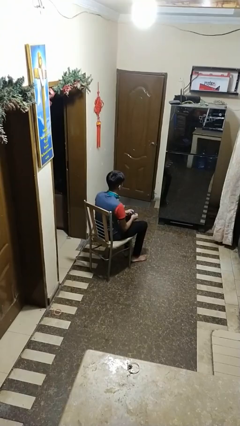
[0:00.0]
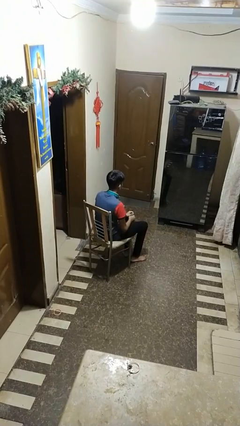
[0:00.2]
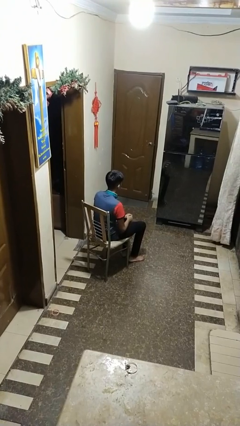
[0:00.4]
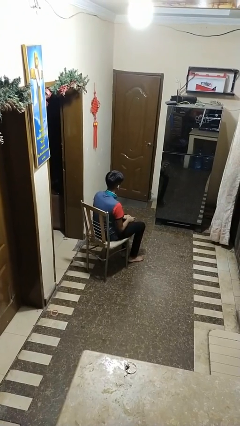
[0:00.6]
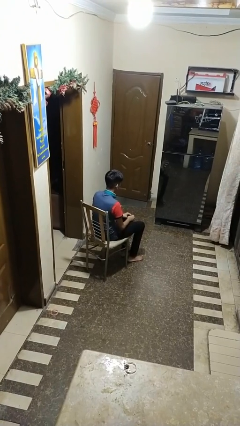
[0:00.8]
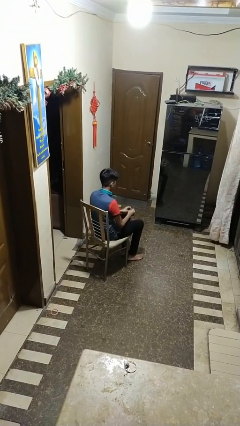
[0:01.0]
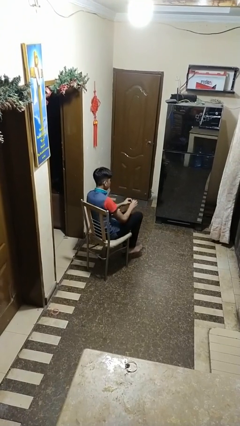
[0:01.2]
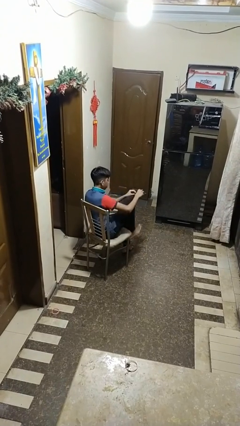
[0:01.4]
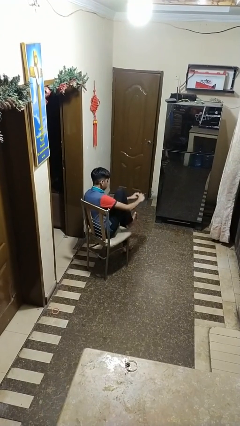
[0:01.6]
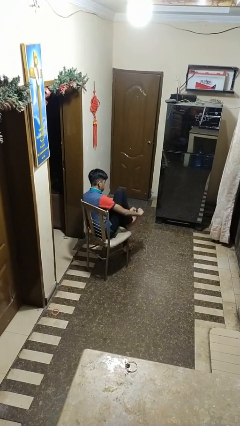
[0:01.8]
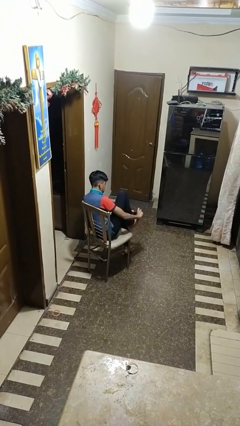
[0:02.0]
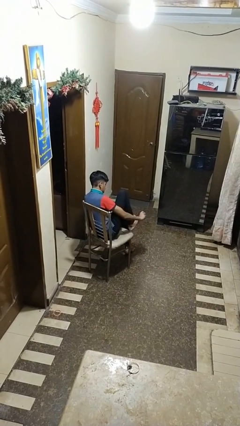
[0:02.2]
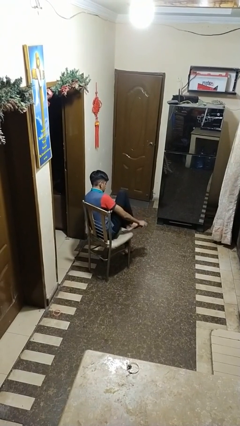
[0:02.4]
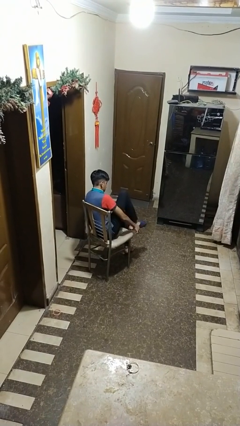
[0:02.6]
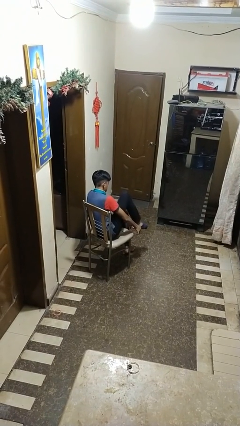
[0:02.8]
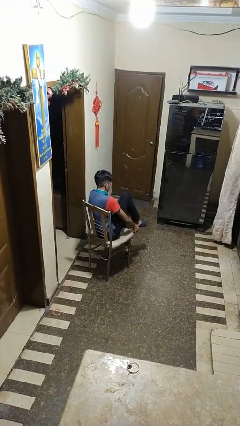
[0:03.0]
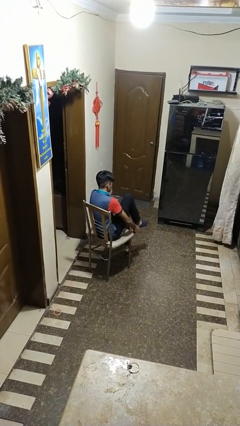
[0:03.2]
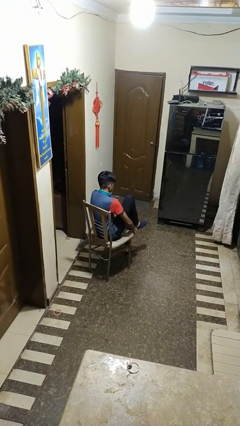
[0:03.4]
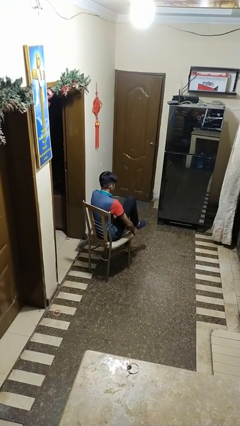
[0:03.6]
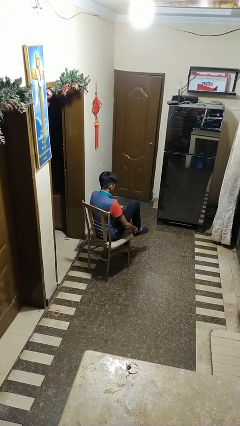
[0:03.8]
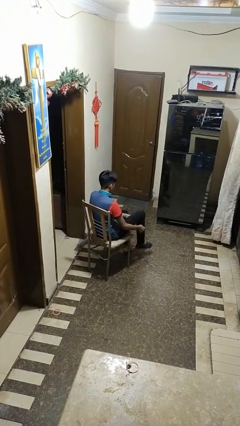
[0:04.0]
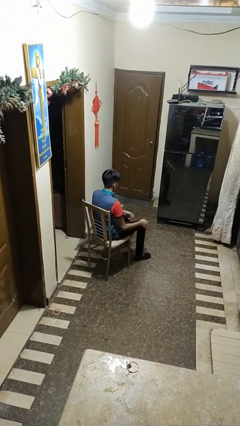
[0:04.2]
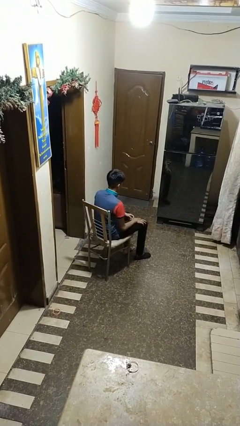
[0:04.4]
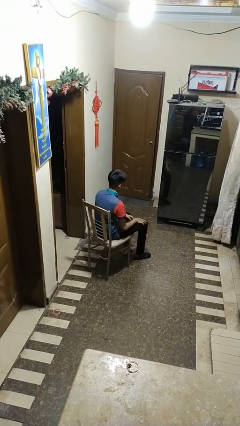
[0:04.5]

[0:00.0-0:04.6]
person puts on socks

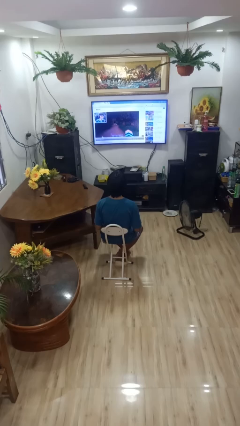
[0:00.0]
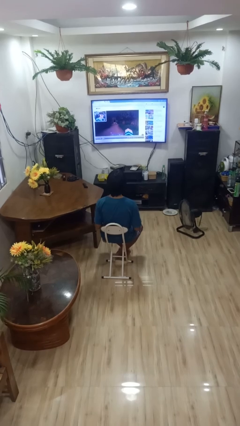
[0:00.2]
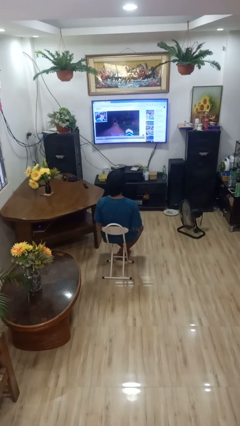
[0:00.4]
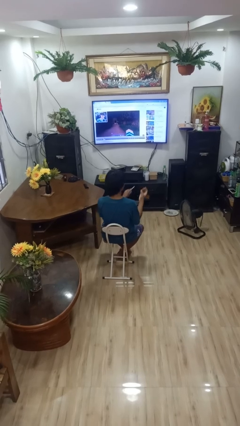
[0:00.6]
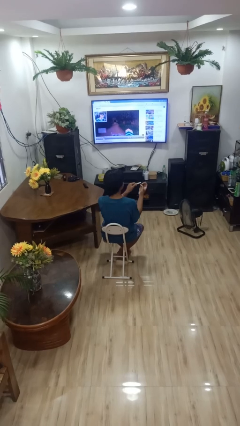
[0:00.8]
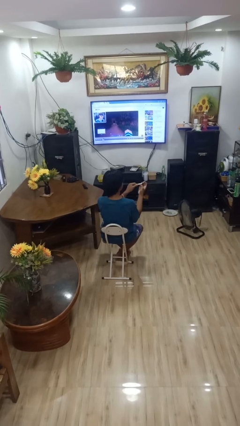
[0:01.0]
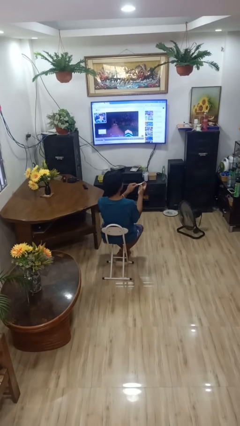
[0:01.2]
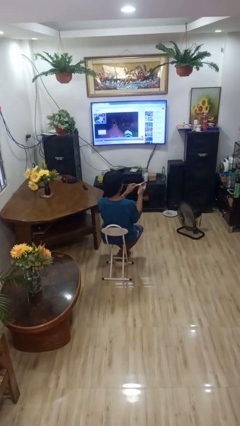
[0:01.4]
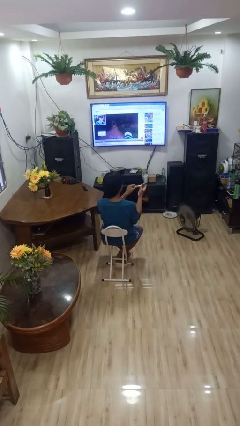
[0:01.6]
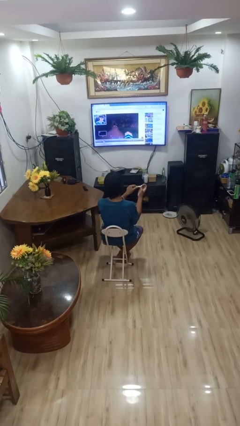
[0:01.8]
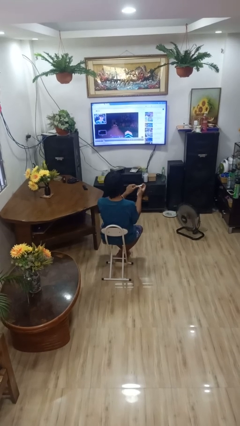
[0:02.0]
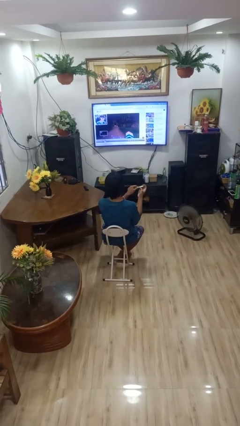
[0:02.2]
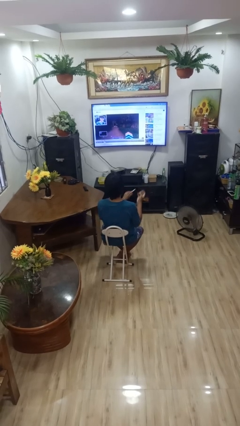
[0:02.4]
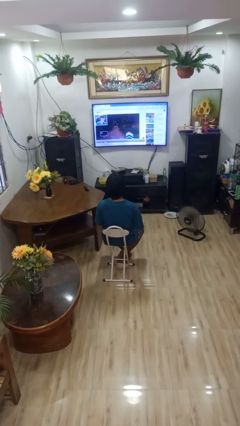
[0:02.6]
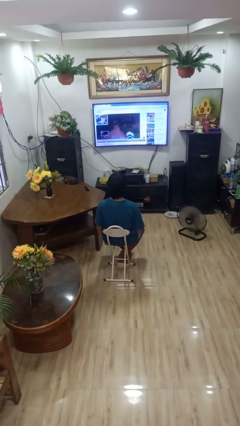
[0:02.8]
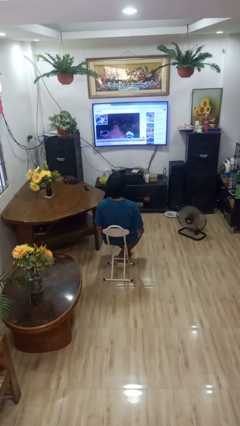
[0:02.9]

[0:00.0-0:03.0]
person files fingernails

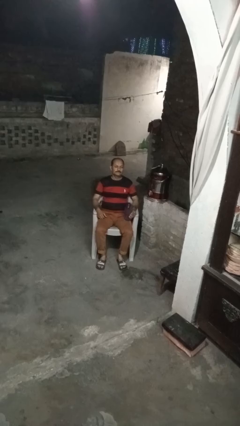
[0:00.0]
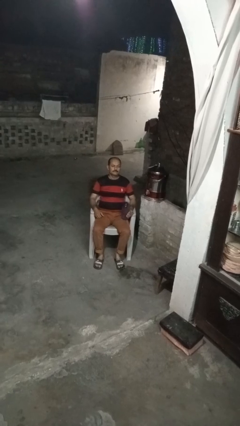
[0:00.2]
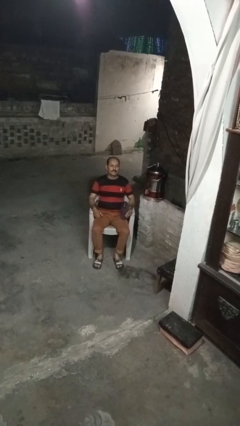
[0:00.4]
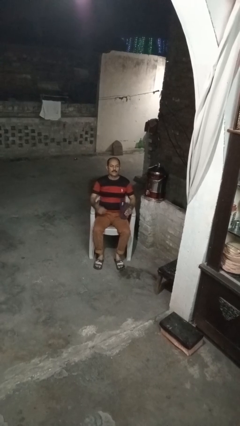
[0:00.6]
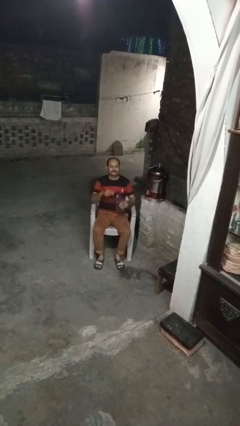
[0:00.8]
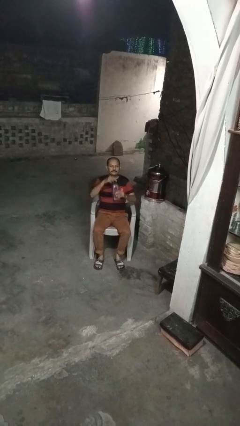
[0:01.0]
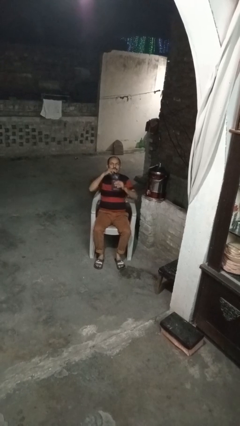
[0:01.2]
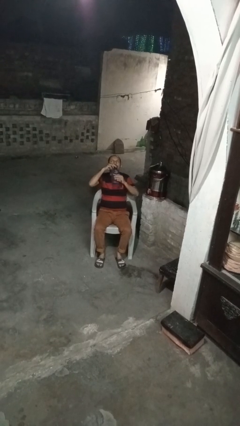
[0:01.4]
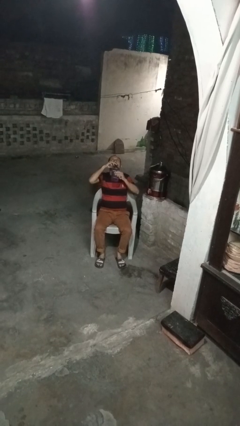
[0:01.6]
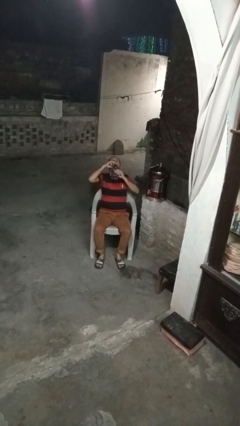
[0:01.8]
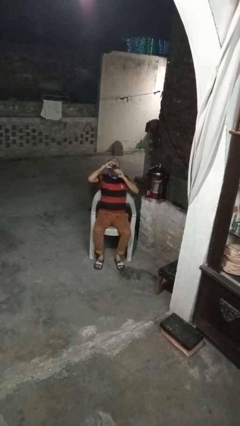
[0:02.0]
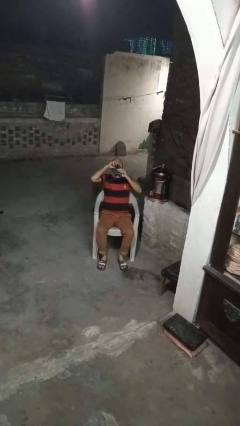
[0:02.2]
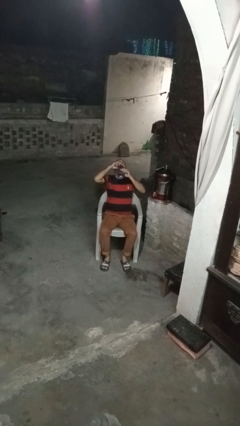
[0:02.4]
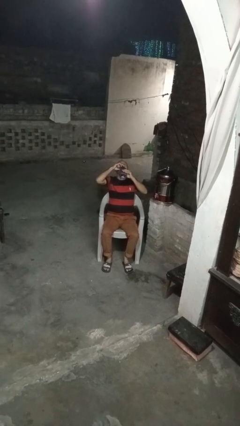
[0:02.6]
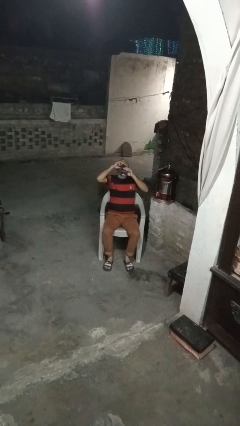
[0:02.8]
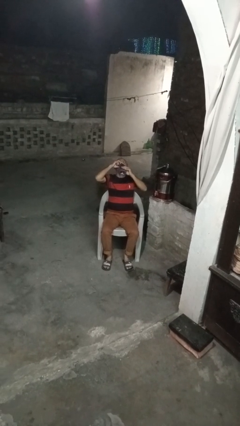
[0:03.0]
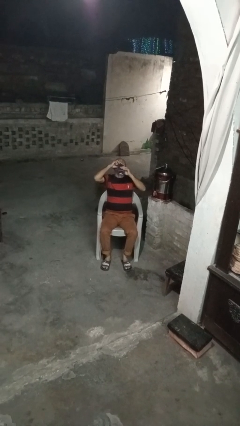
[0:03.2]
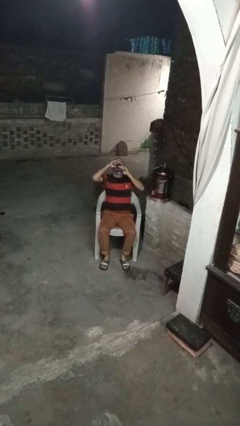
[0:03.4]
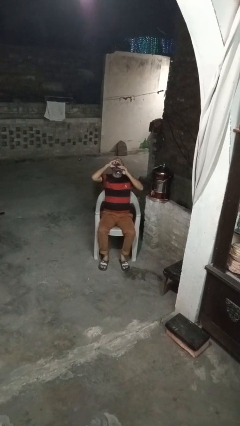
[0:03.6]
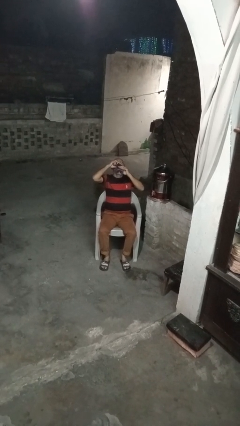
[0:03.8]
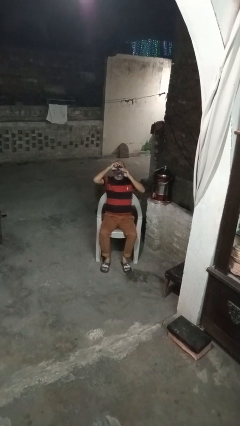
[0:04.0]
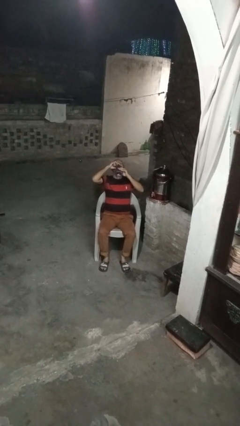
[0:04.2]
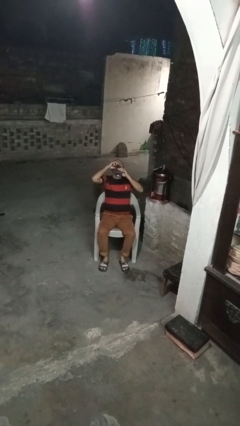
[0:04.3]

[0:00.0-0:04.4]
person drinks from bottle

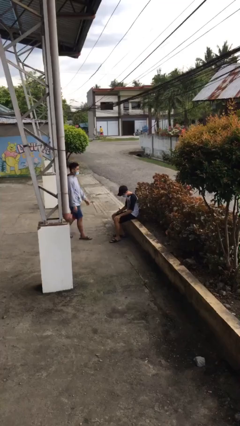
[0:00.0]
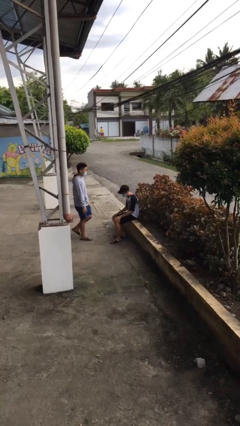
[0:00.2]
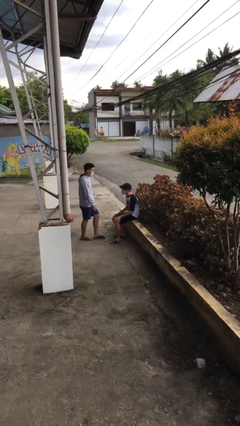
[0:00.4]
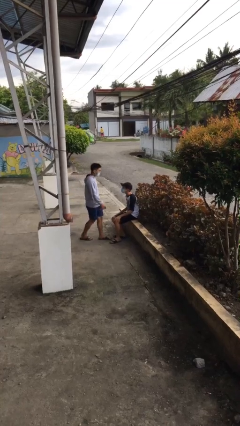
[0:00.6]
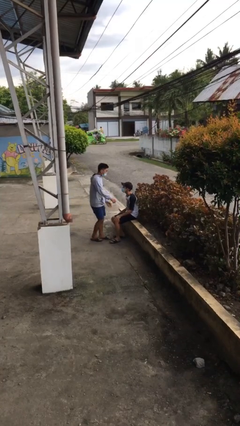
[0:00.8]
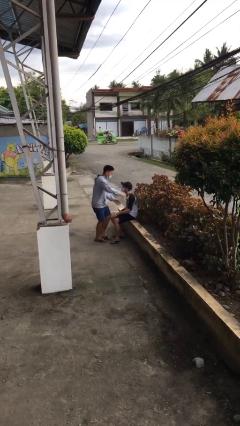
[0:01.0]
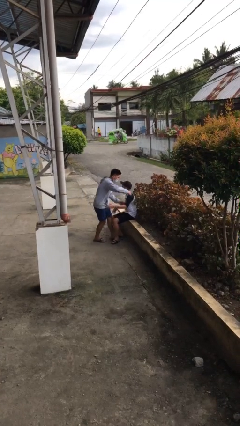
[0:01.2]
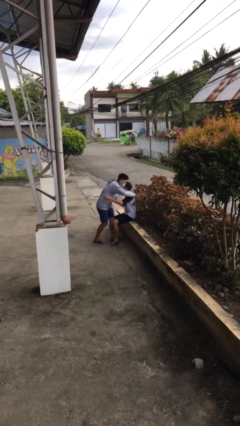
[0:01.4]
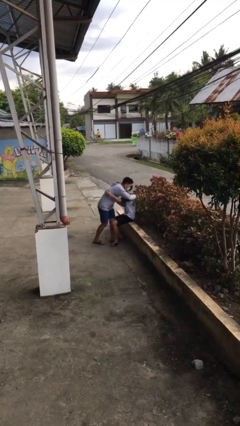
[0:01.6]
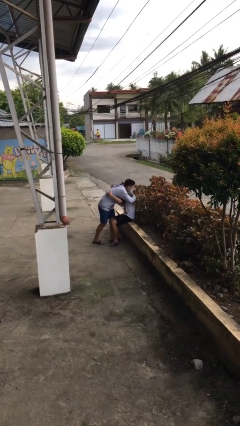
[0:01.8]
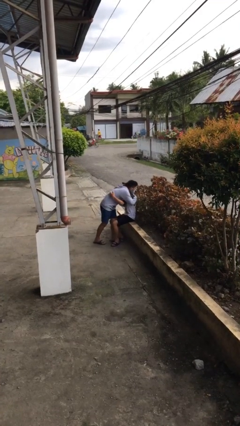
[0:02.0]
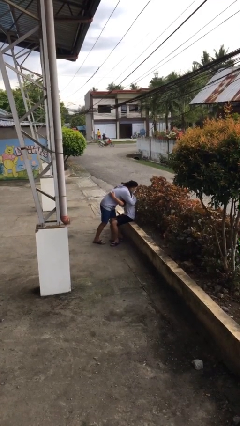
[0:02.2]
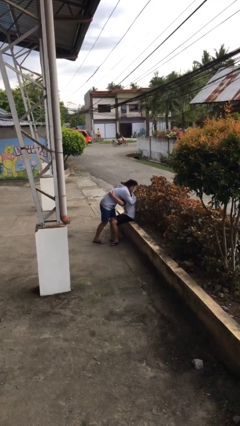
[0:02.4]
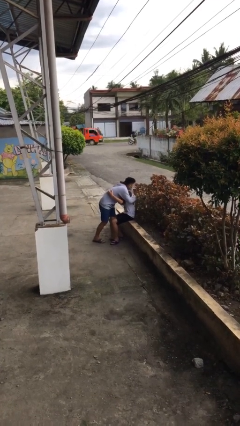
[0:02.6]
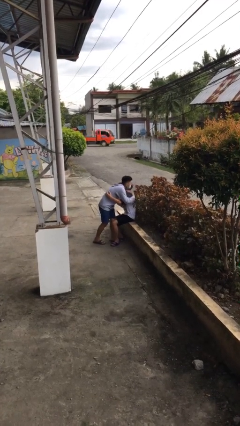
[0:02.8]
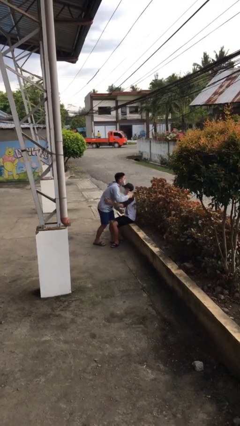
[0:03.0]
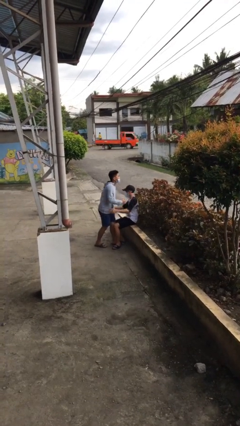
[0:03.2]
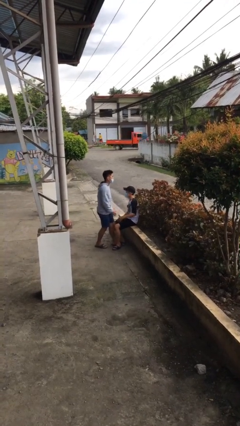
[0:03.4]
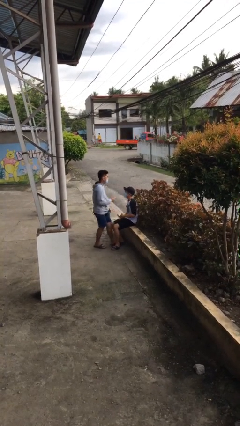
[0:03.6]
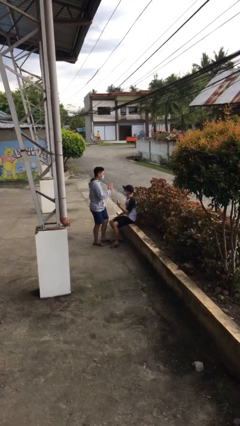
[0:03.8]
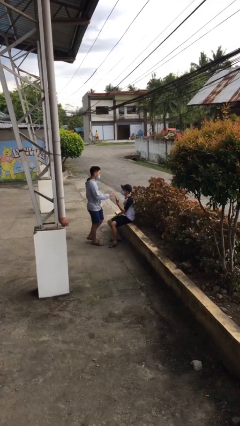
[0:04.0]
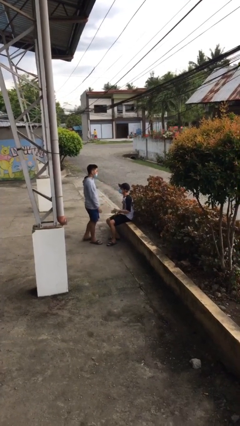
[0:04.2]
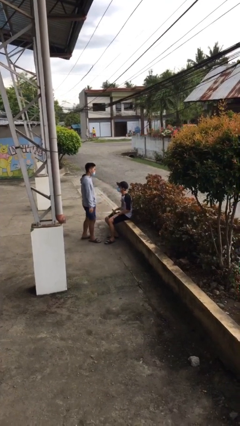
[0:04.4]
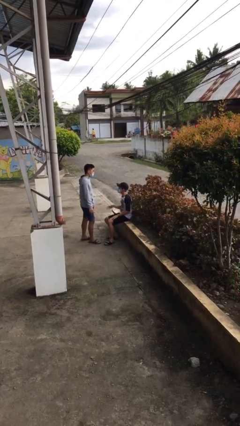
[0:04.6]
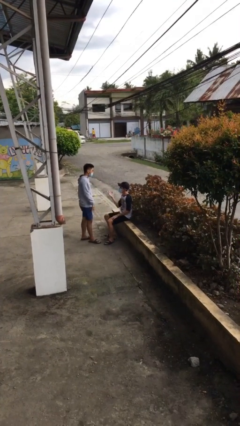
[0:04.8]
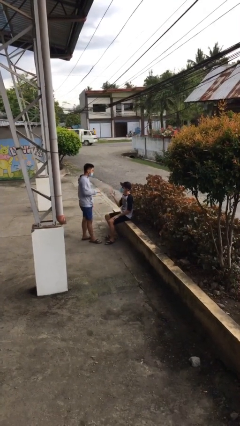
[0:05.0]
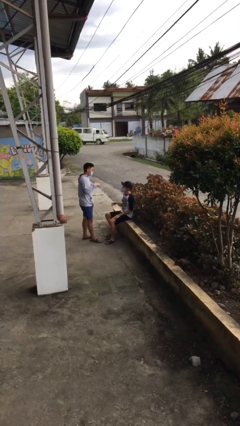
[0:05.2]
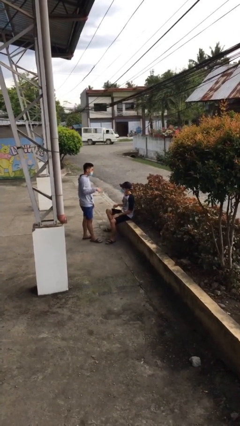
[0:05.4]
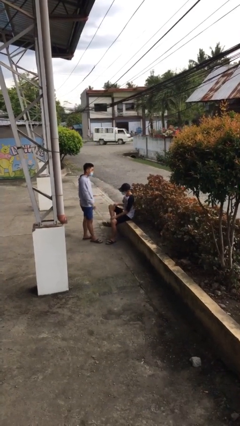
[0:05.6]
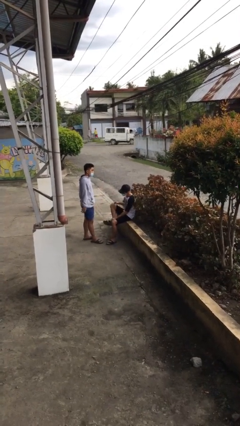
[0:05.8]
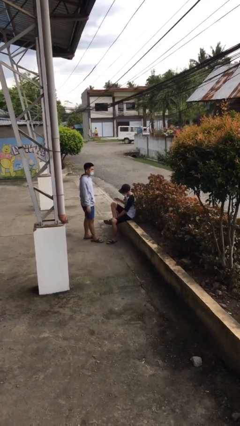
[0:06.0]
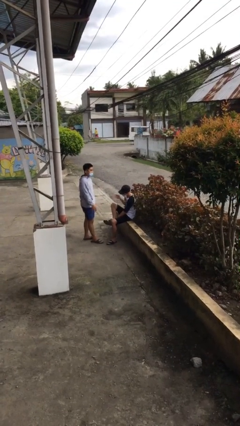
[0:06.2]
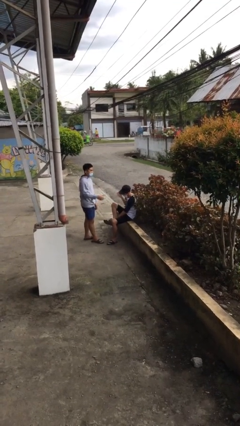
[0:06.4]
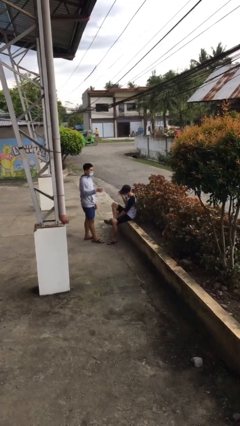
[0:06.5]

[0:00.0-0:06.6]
person embraces person
